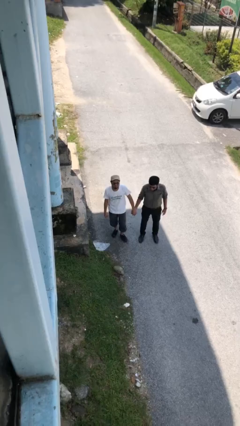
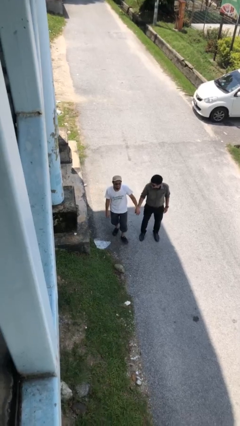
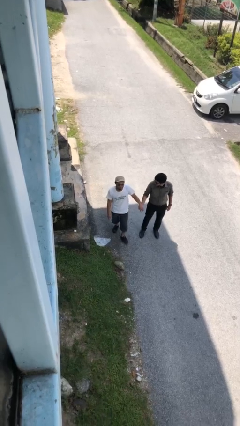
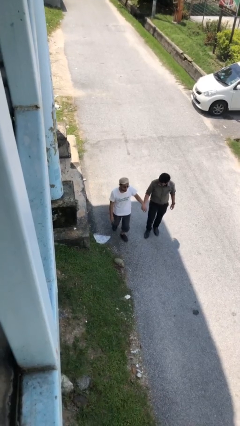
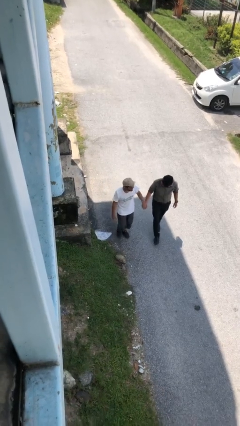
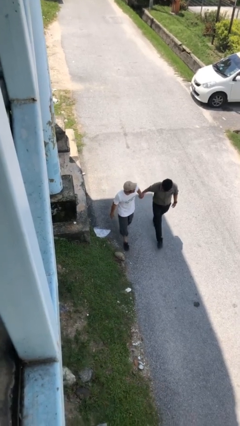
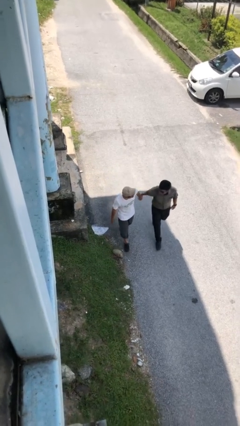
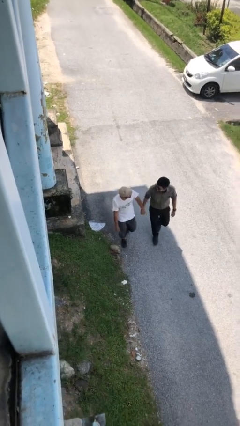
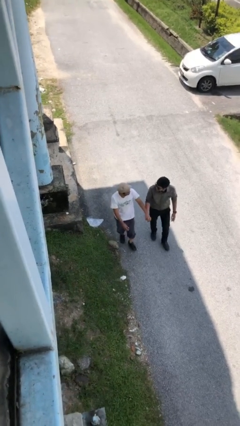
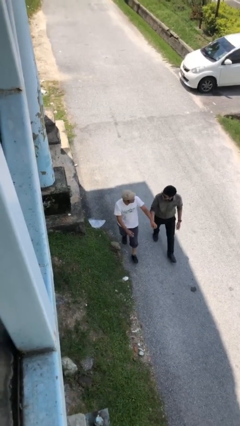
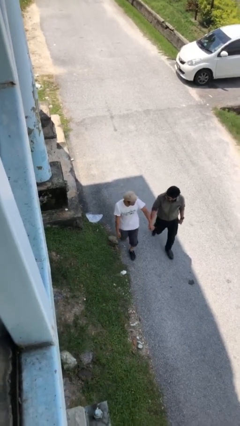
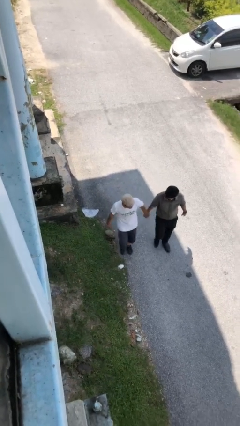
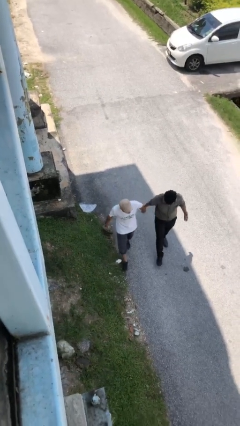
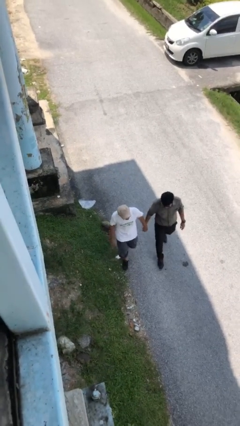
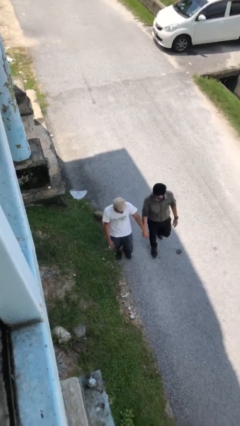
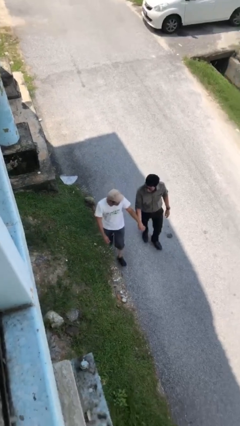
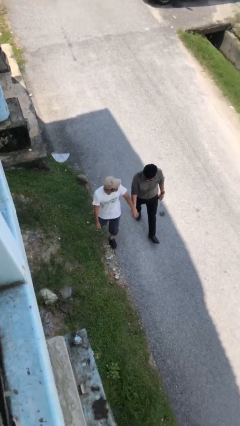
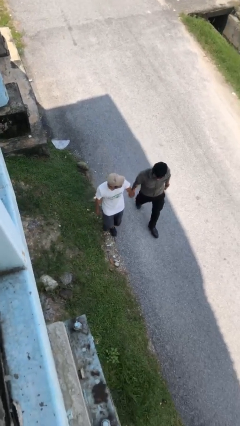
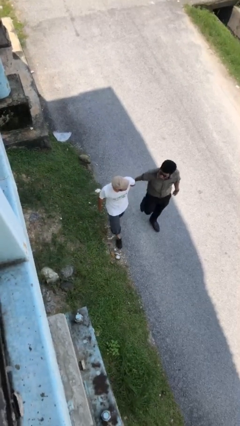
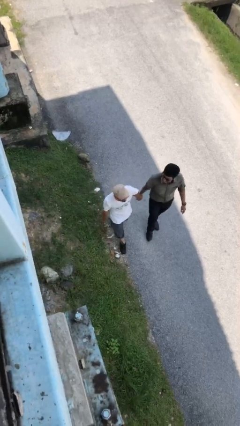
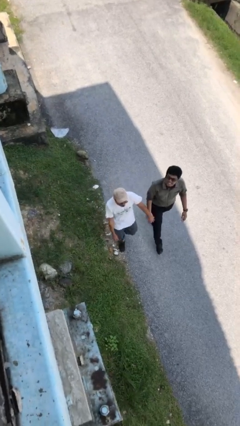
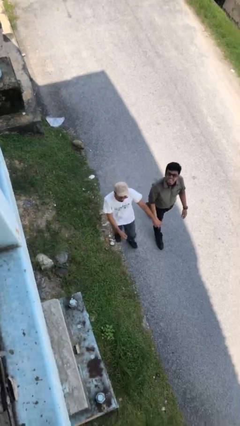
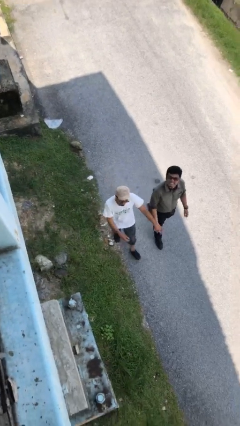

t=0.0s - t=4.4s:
person holds hand

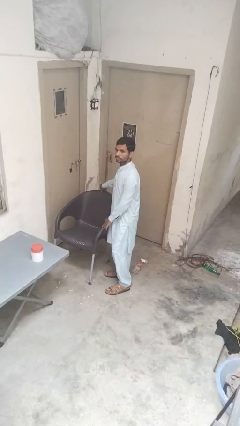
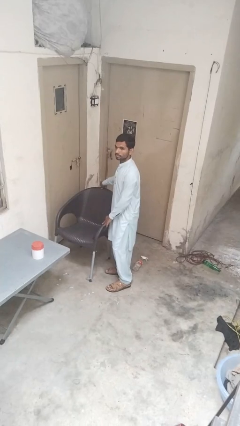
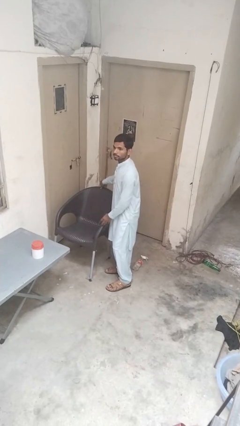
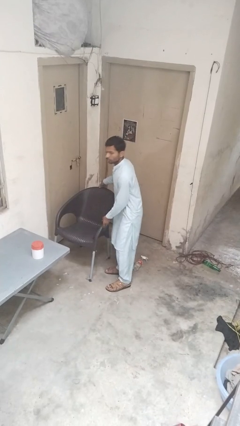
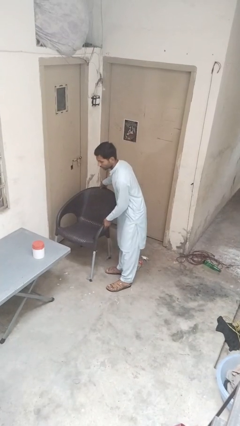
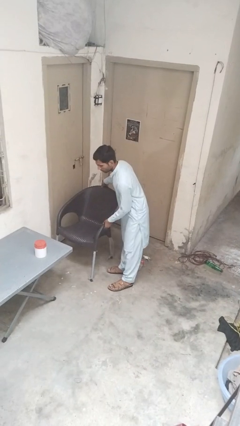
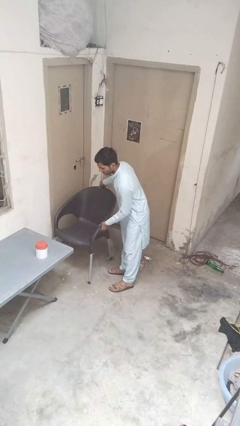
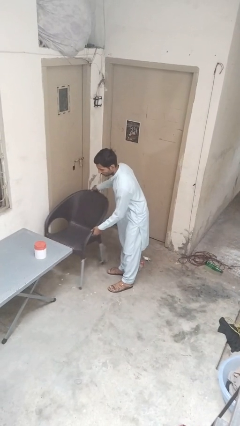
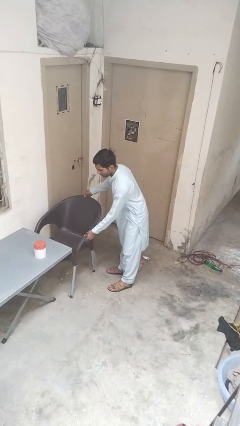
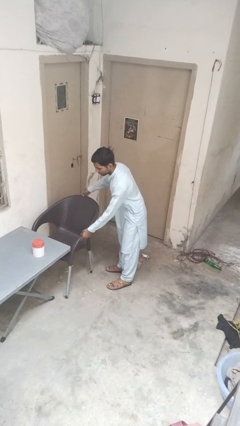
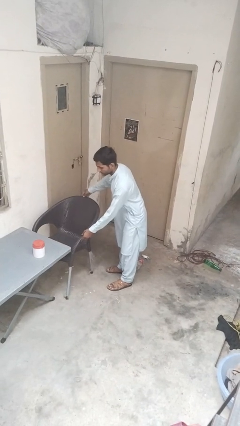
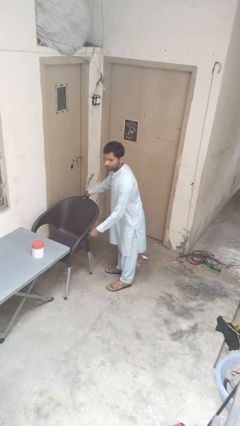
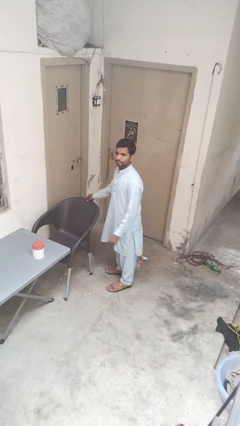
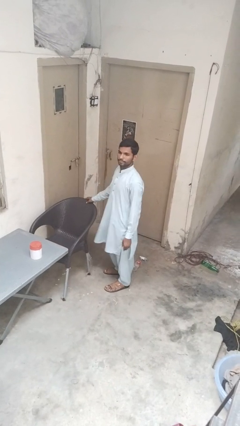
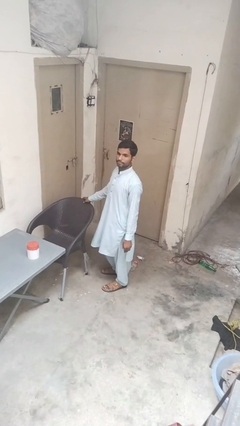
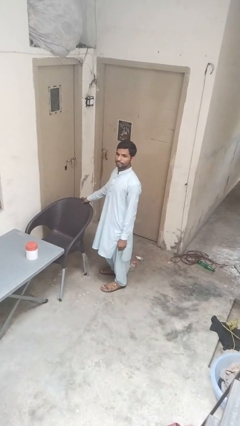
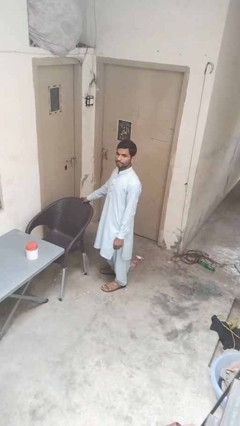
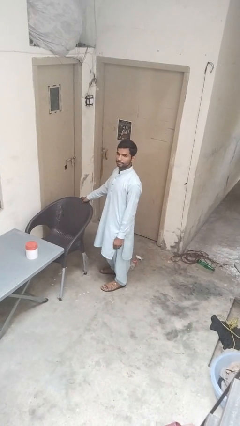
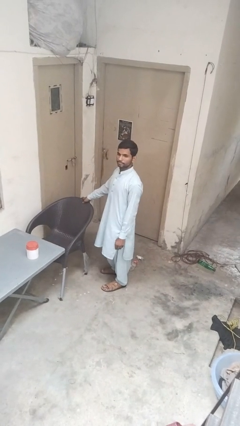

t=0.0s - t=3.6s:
person pushes in chair

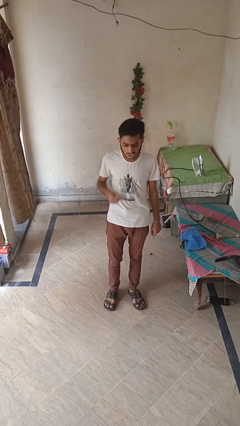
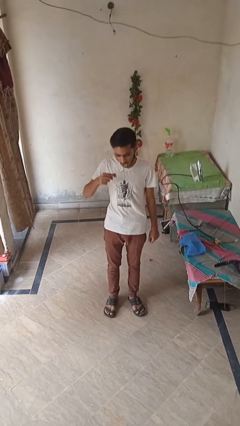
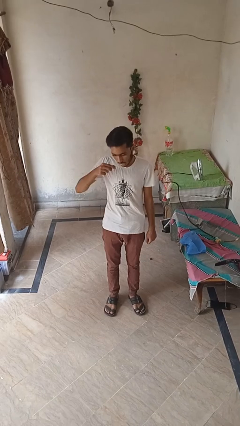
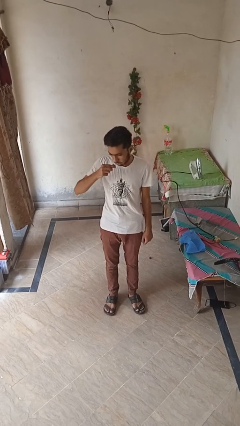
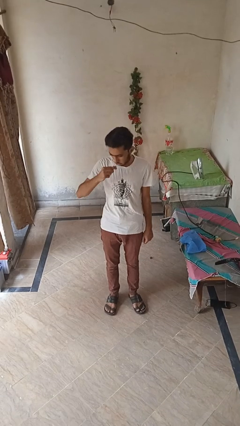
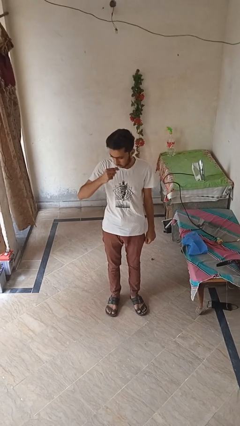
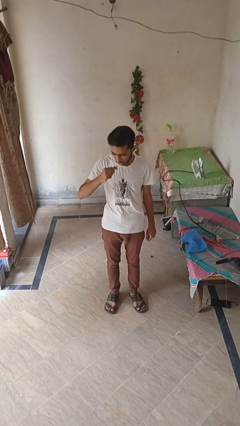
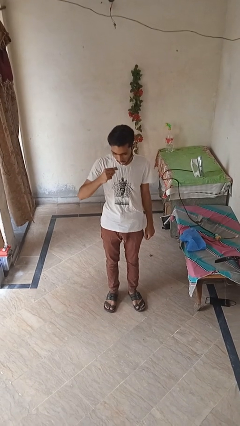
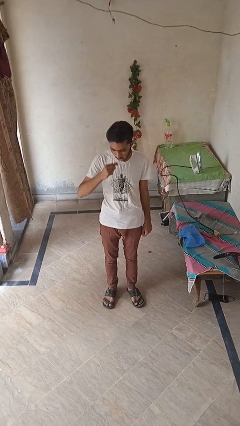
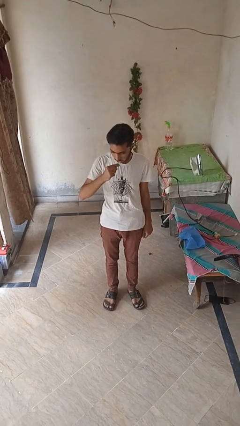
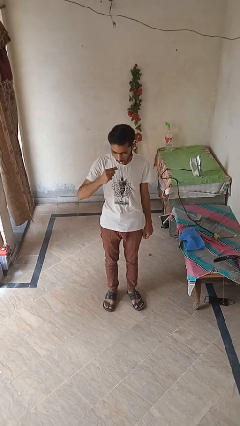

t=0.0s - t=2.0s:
person brushes teeth

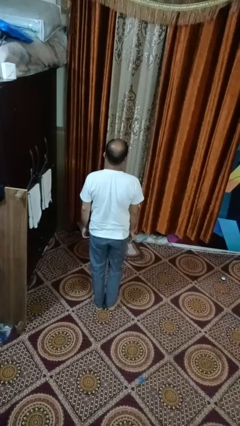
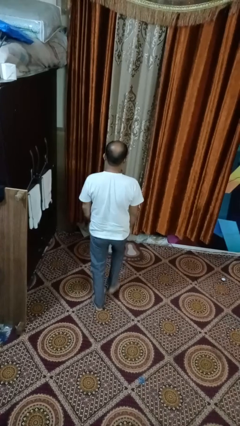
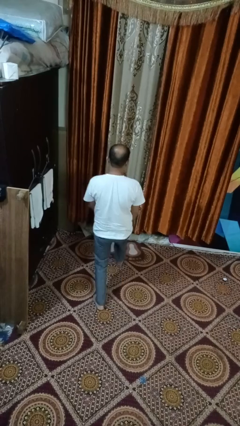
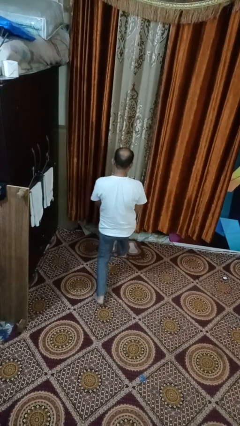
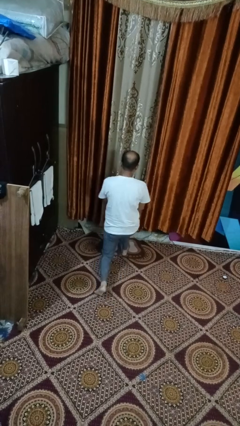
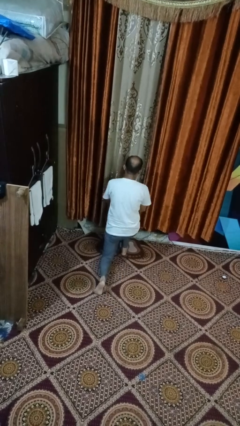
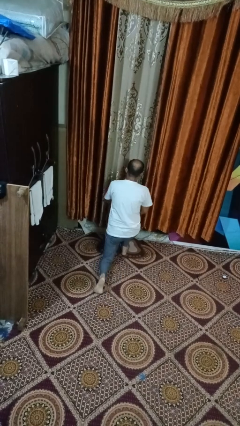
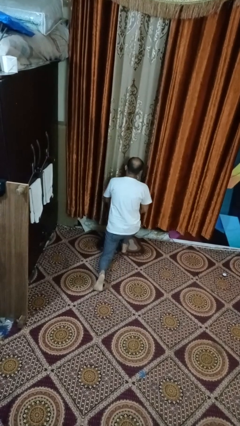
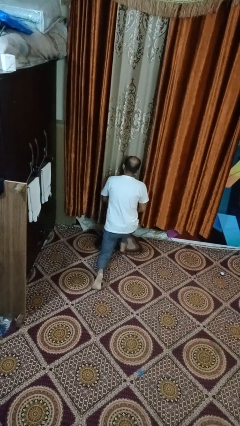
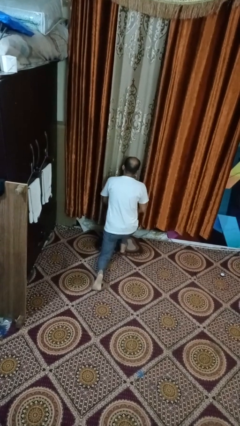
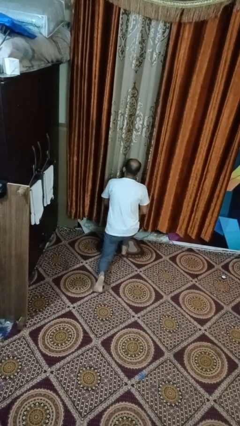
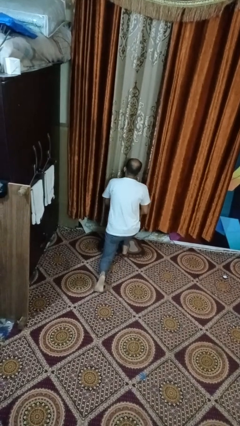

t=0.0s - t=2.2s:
person kneels

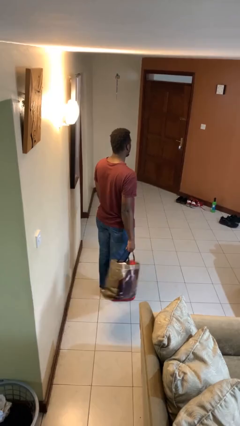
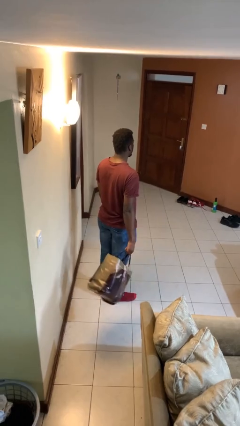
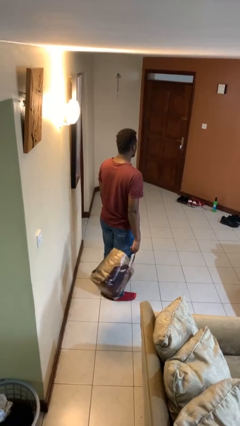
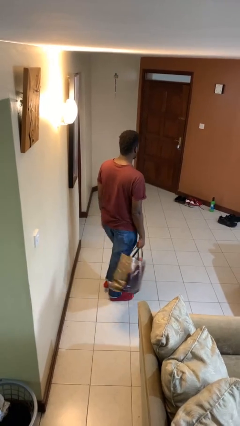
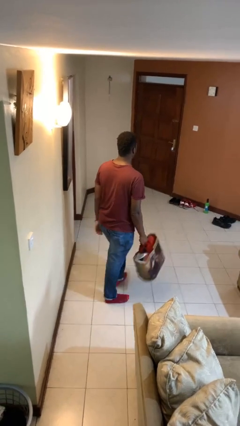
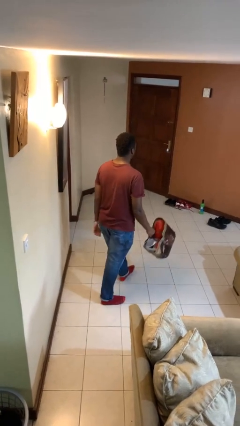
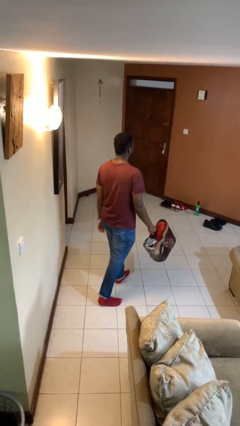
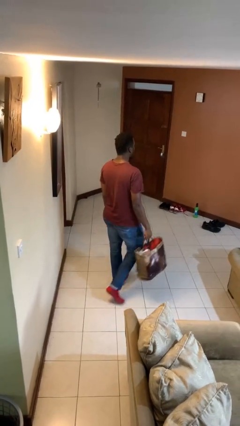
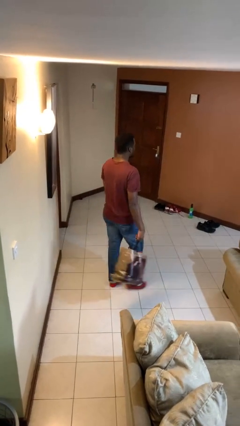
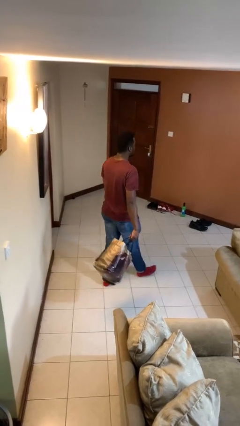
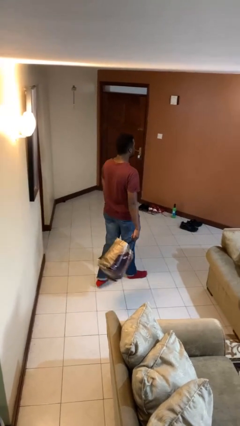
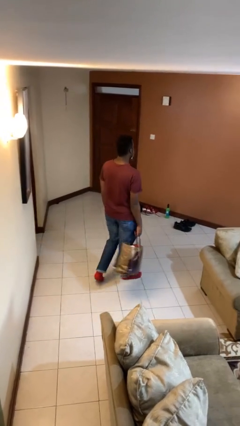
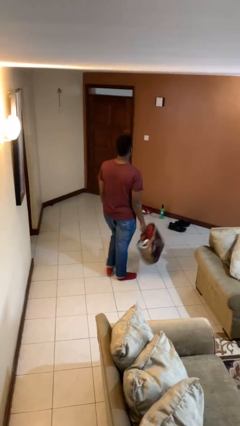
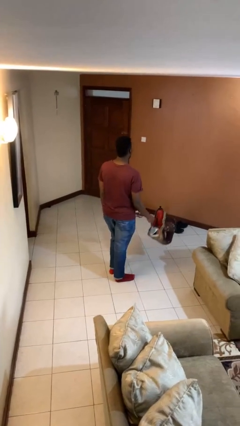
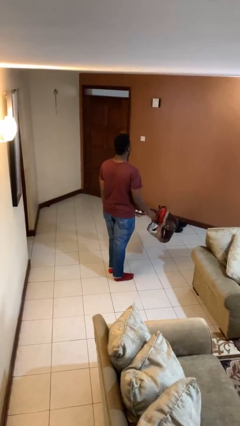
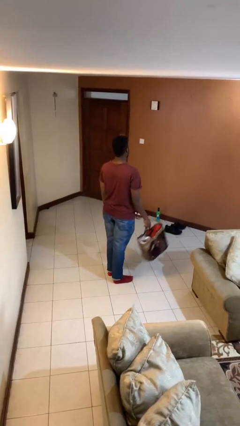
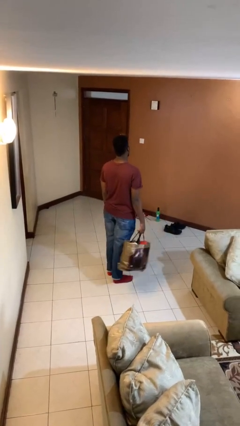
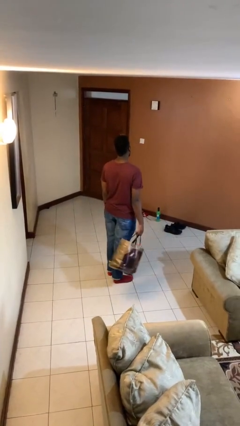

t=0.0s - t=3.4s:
person carries groceries

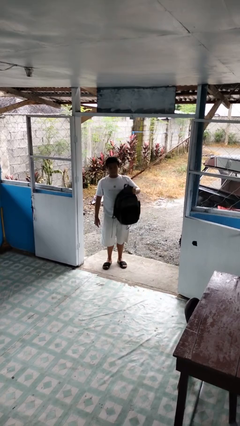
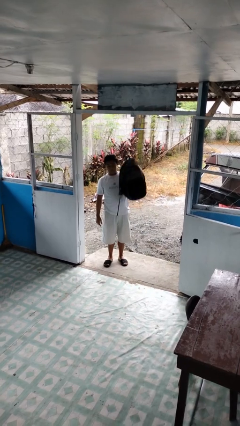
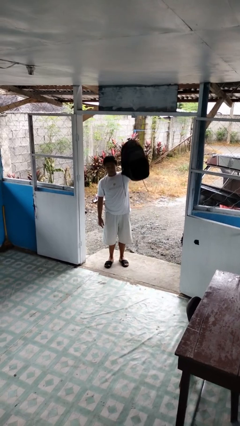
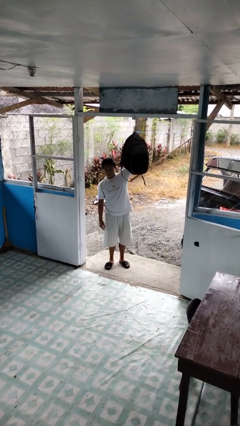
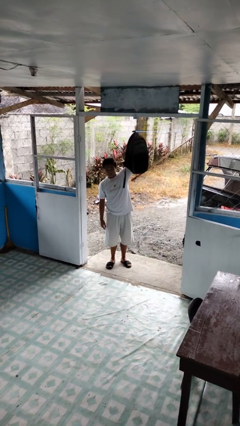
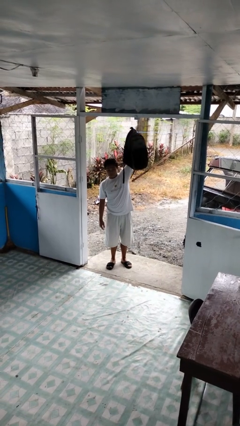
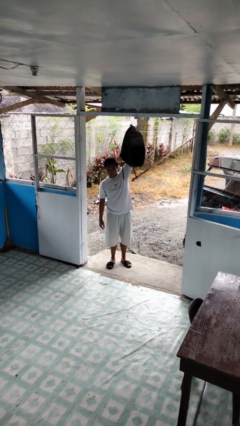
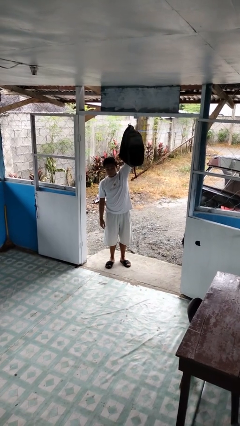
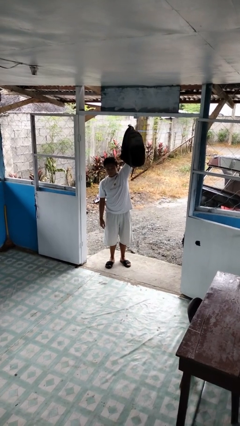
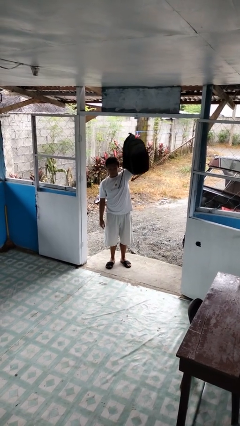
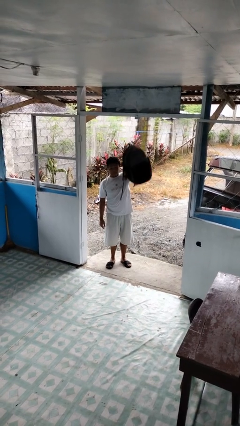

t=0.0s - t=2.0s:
person holds object above head
